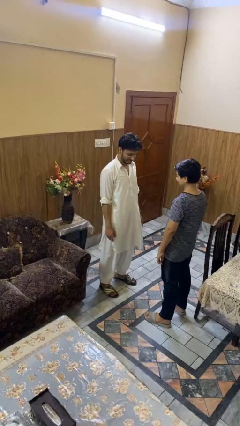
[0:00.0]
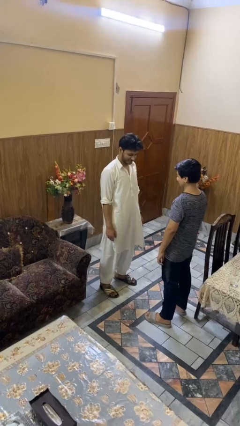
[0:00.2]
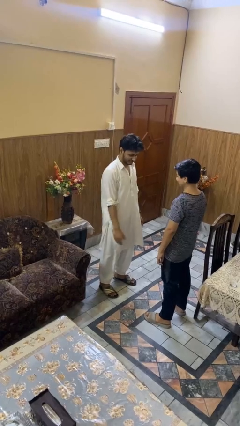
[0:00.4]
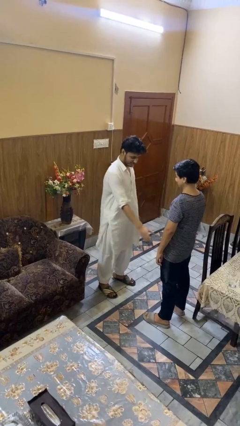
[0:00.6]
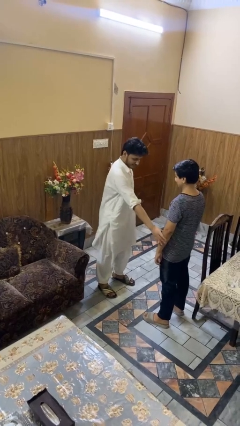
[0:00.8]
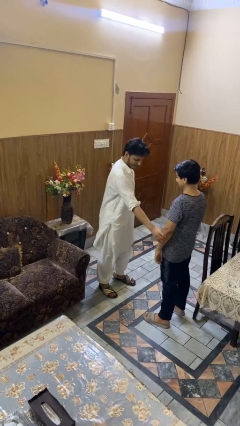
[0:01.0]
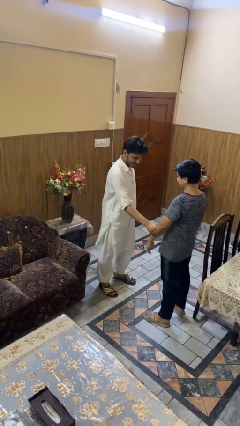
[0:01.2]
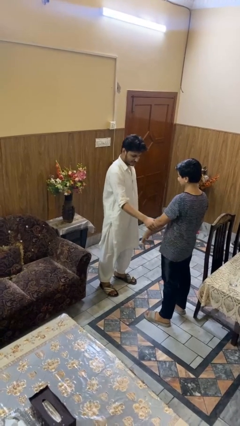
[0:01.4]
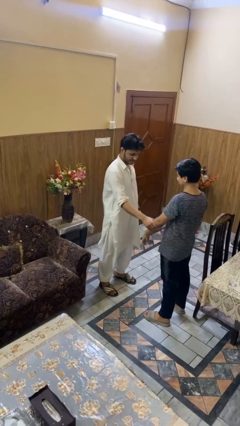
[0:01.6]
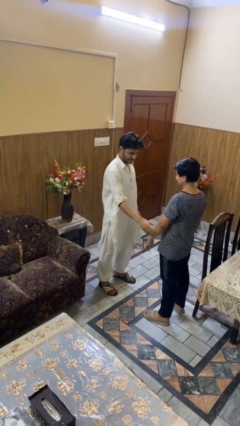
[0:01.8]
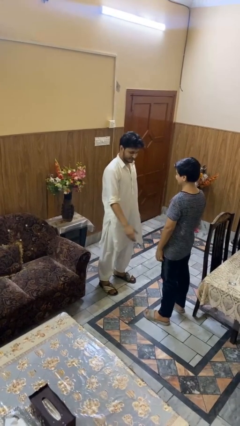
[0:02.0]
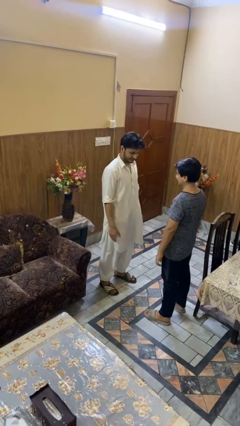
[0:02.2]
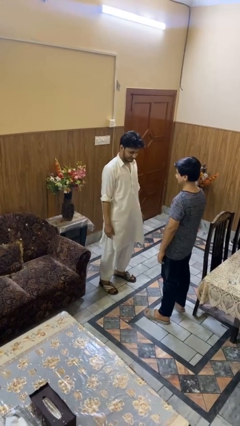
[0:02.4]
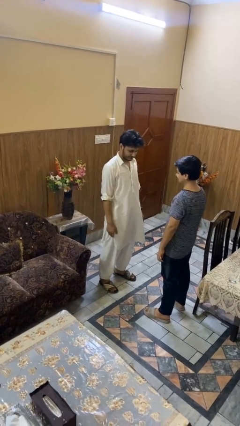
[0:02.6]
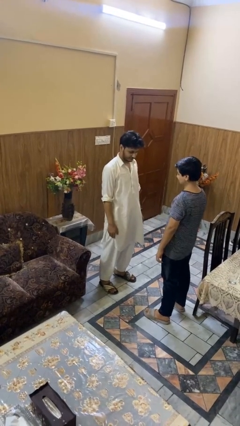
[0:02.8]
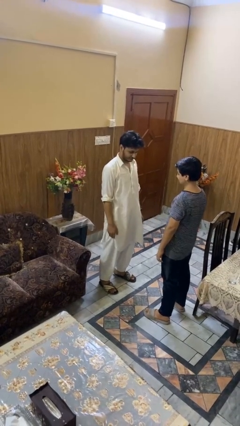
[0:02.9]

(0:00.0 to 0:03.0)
person grabs person by forearm

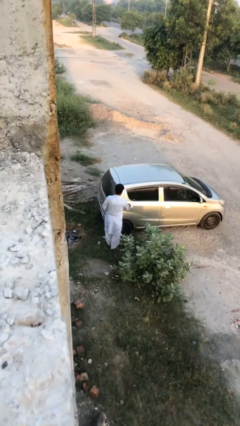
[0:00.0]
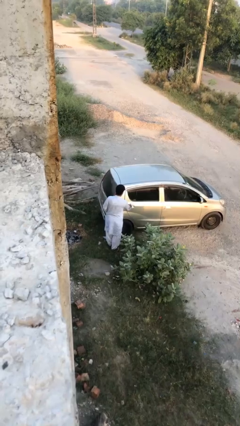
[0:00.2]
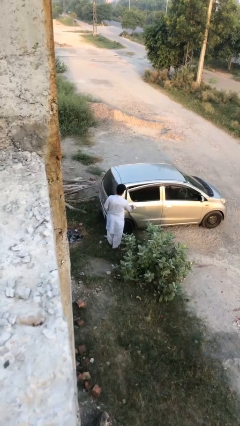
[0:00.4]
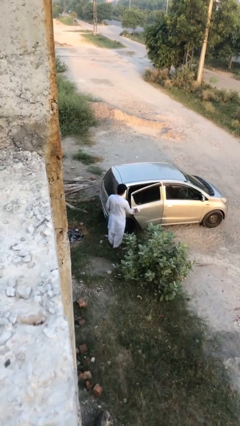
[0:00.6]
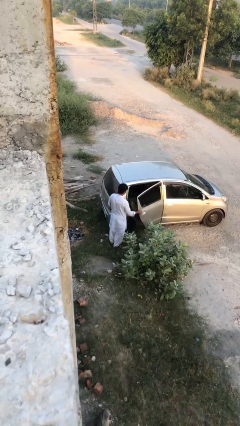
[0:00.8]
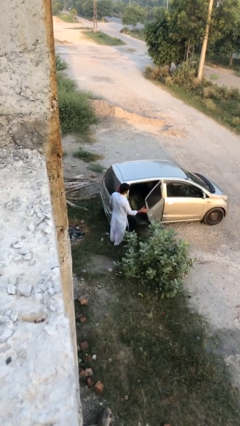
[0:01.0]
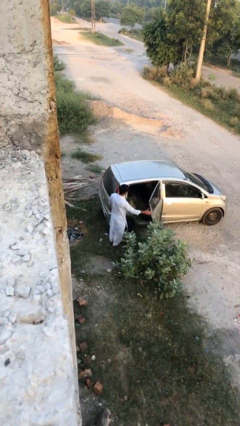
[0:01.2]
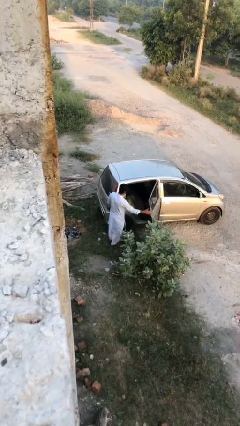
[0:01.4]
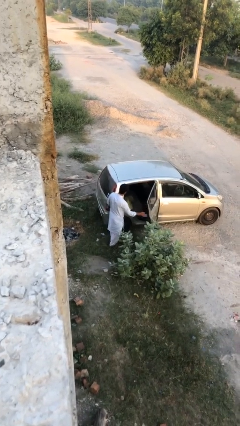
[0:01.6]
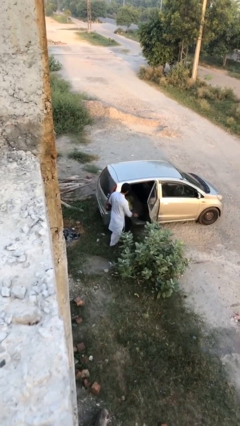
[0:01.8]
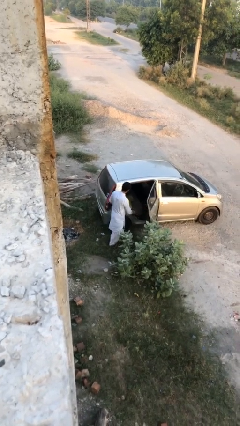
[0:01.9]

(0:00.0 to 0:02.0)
person opens car door

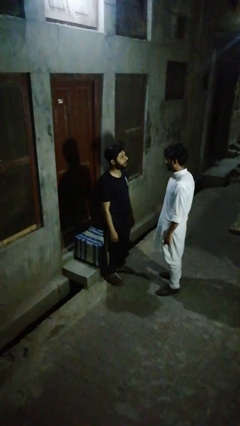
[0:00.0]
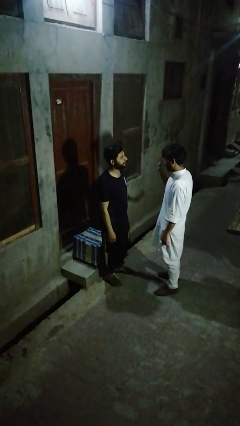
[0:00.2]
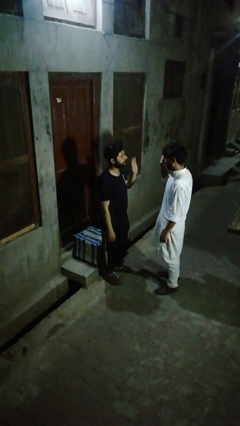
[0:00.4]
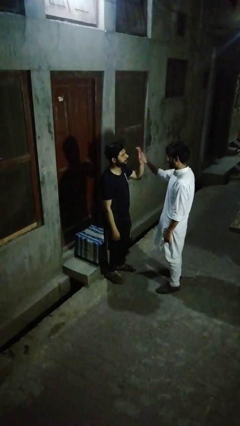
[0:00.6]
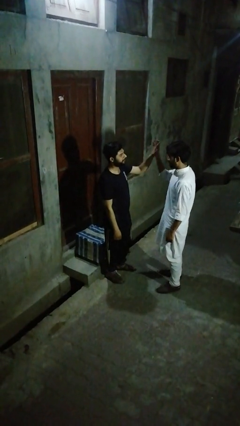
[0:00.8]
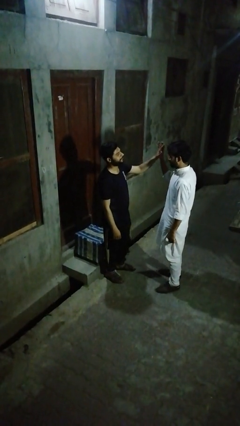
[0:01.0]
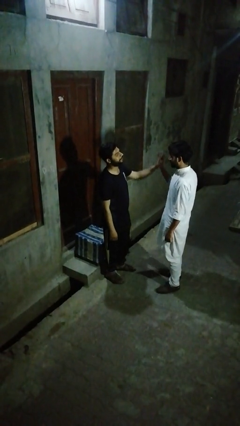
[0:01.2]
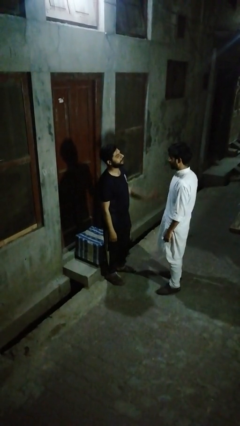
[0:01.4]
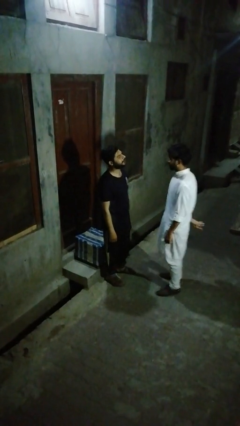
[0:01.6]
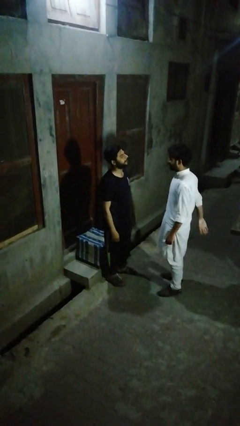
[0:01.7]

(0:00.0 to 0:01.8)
person highfives hand

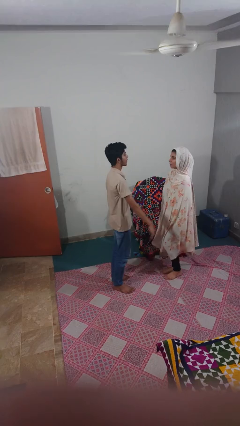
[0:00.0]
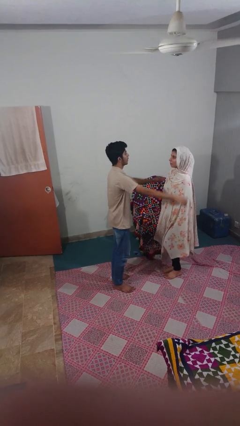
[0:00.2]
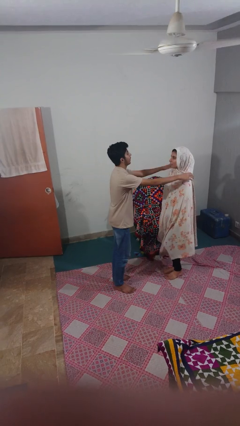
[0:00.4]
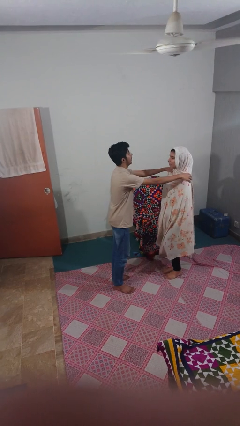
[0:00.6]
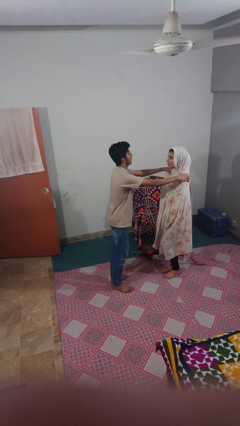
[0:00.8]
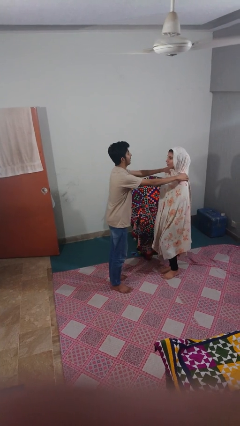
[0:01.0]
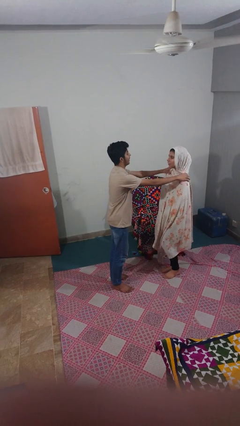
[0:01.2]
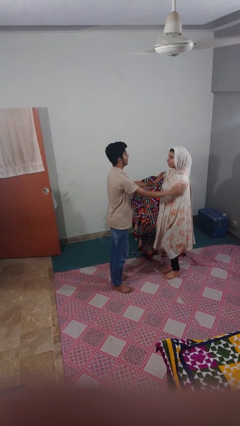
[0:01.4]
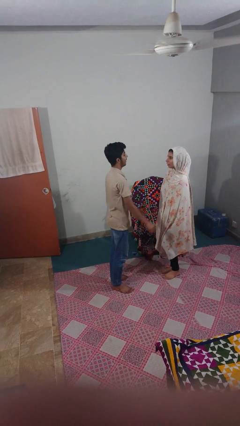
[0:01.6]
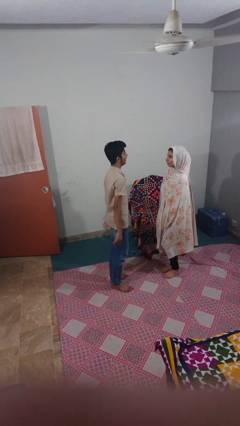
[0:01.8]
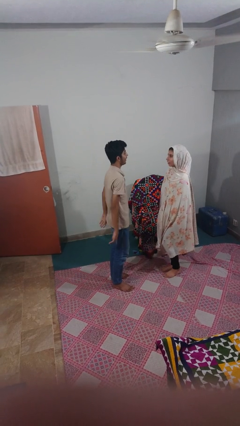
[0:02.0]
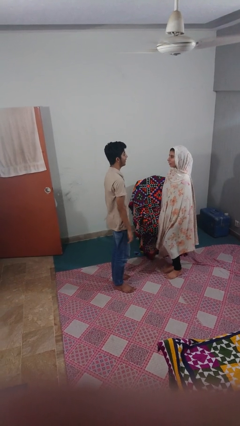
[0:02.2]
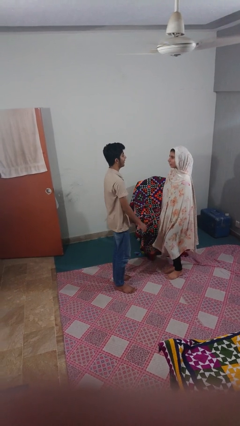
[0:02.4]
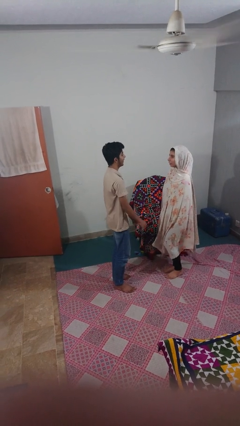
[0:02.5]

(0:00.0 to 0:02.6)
person pounds shoulders of person

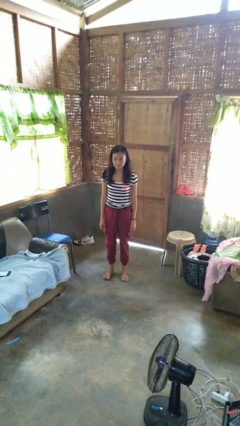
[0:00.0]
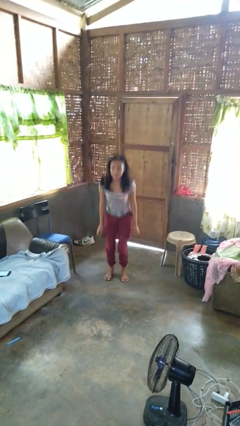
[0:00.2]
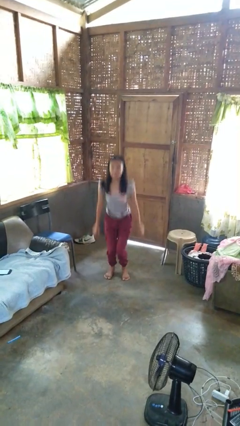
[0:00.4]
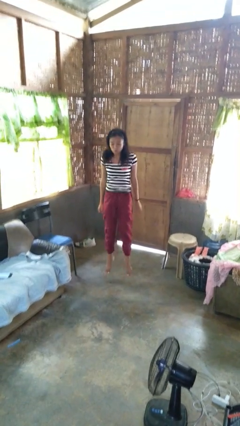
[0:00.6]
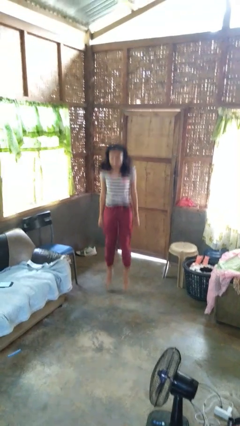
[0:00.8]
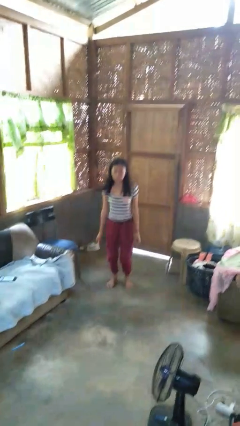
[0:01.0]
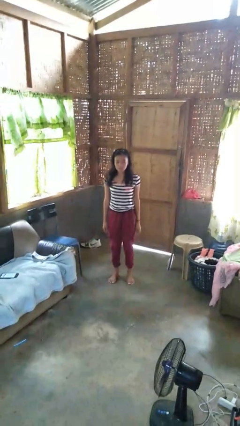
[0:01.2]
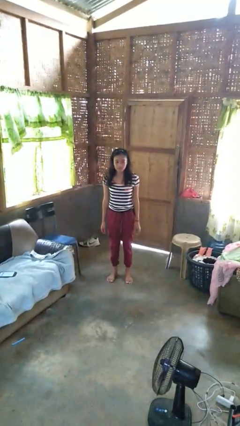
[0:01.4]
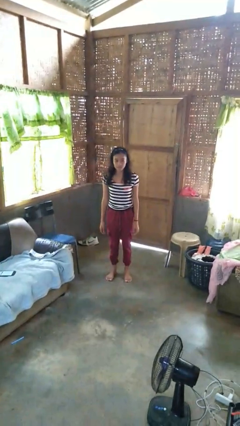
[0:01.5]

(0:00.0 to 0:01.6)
person jumps

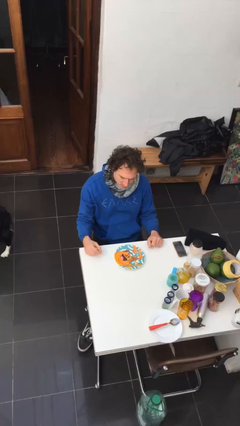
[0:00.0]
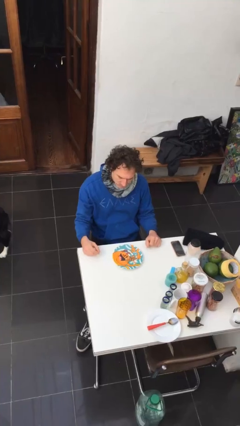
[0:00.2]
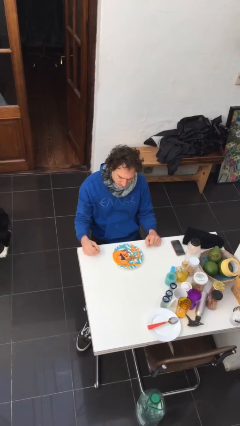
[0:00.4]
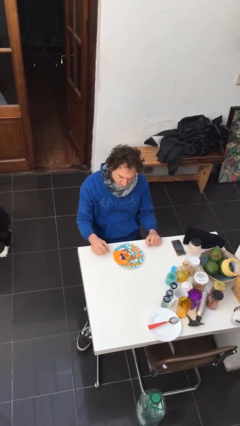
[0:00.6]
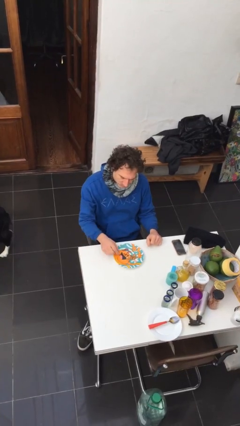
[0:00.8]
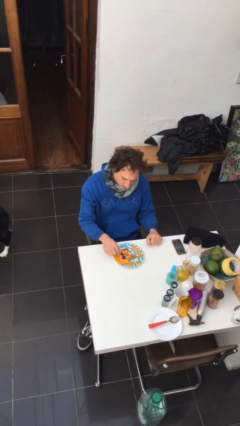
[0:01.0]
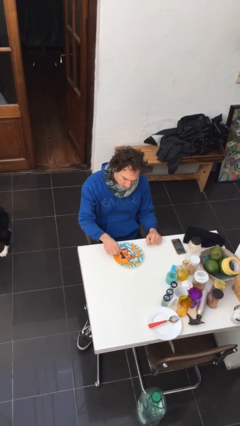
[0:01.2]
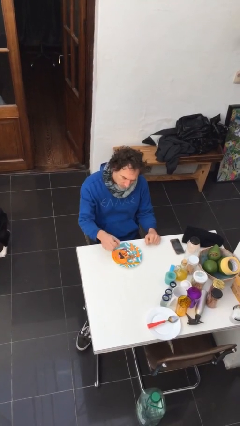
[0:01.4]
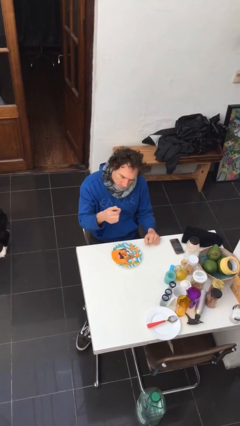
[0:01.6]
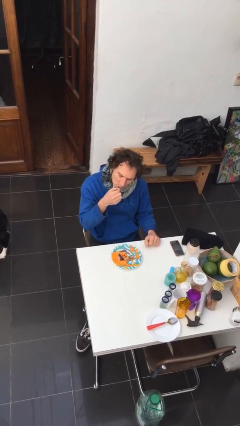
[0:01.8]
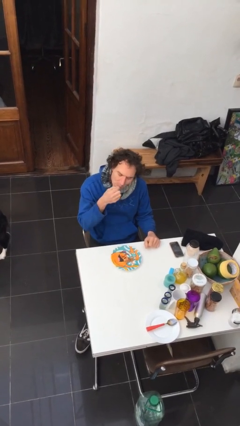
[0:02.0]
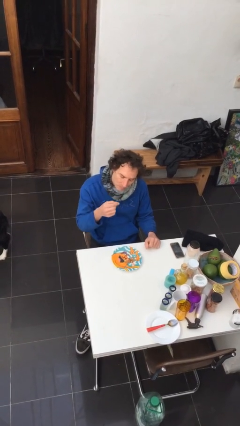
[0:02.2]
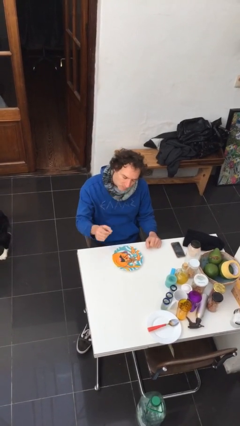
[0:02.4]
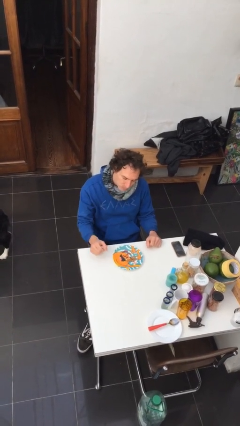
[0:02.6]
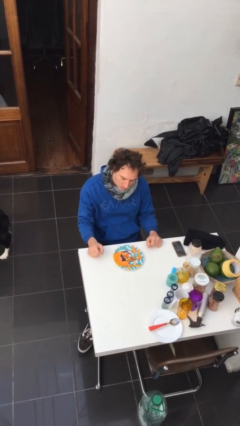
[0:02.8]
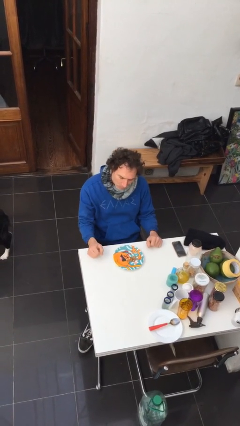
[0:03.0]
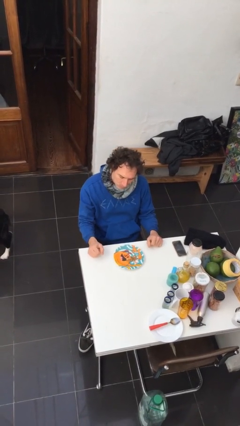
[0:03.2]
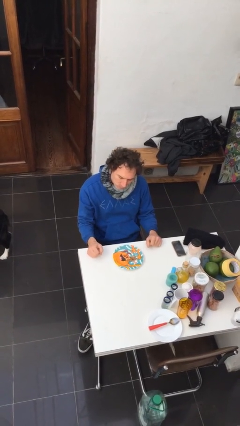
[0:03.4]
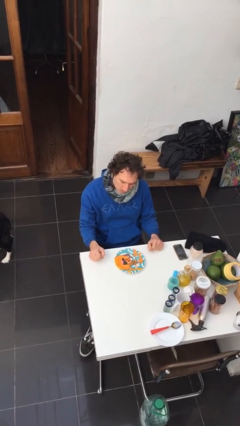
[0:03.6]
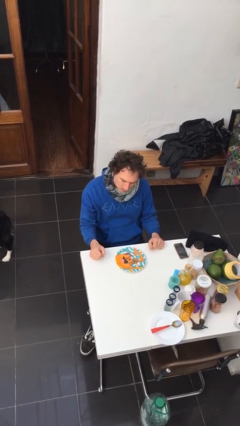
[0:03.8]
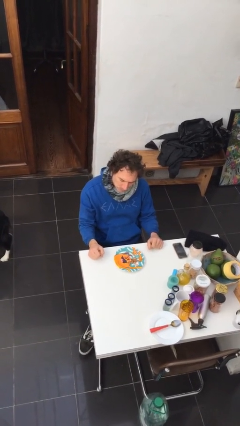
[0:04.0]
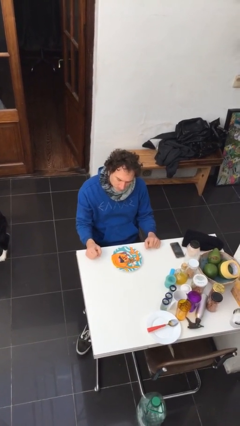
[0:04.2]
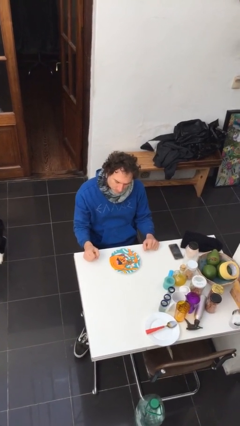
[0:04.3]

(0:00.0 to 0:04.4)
person eats with hands

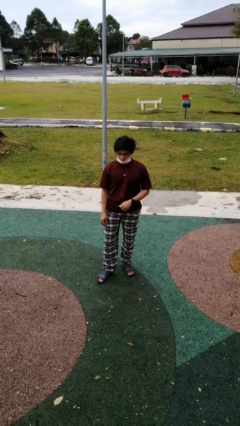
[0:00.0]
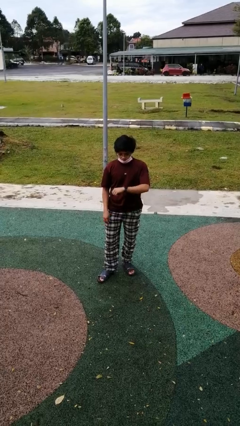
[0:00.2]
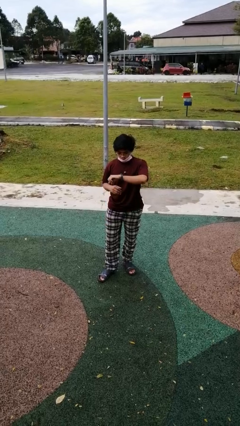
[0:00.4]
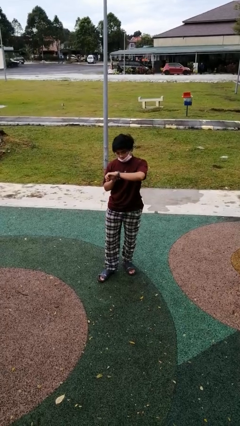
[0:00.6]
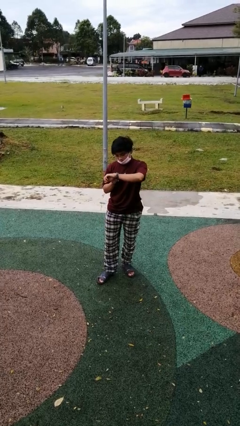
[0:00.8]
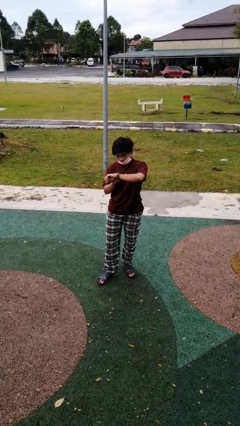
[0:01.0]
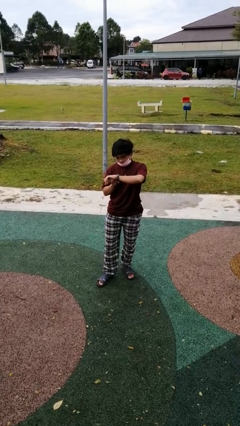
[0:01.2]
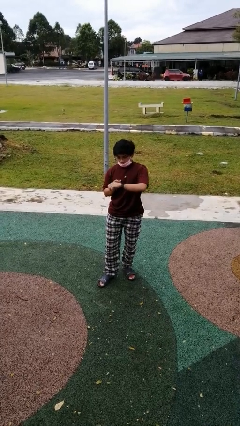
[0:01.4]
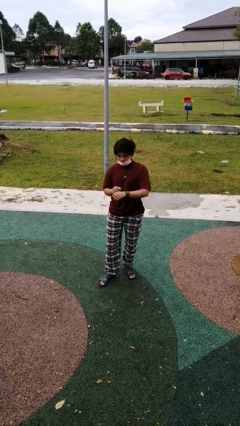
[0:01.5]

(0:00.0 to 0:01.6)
person looks at wristwatch
